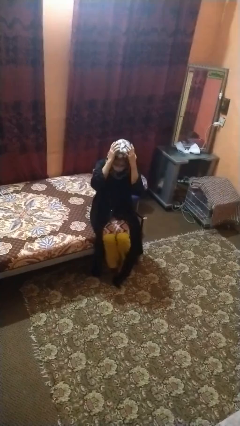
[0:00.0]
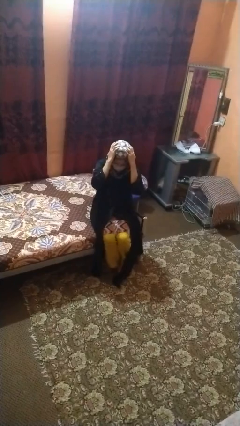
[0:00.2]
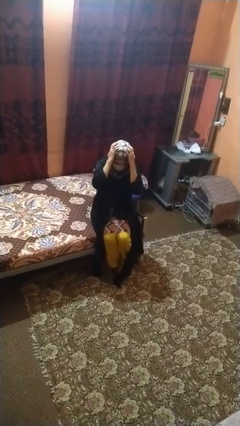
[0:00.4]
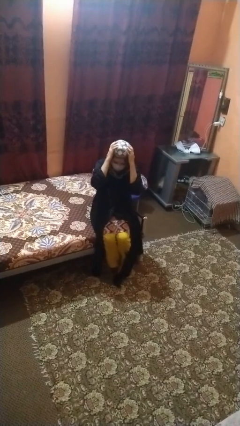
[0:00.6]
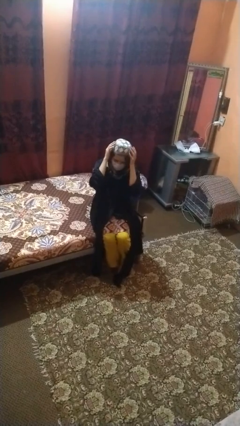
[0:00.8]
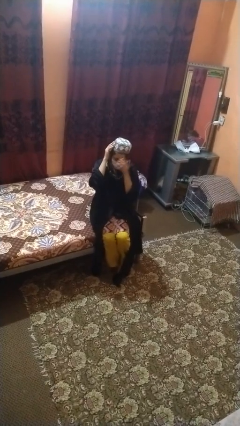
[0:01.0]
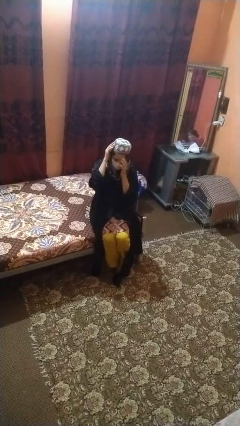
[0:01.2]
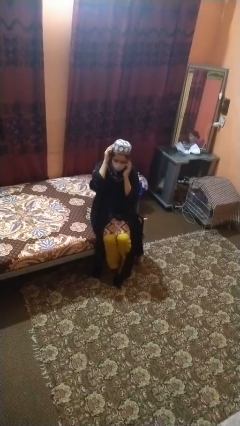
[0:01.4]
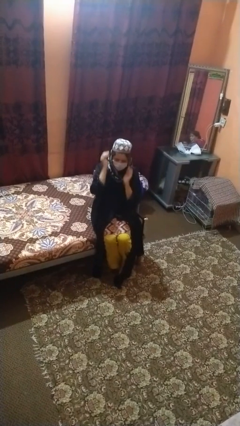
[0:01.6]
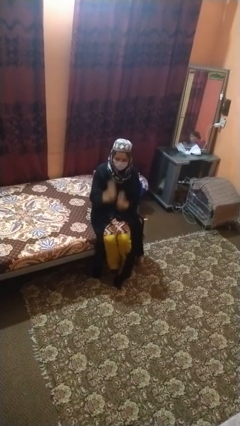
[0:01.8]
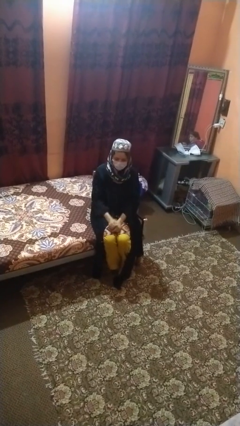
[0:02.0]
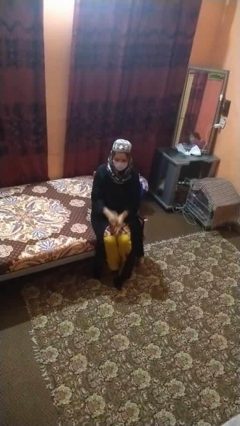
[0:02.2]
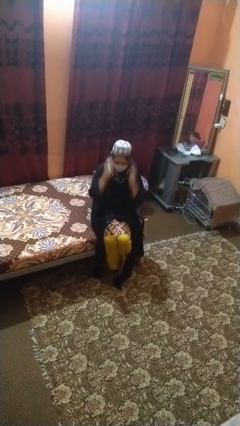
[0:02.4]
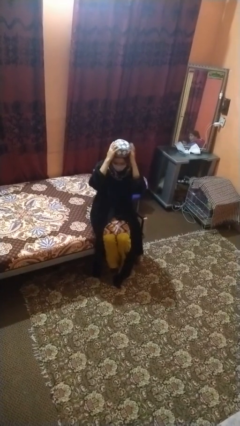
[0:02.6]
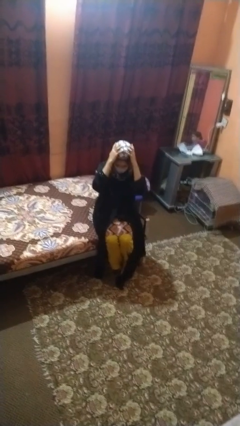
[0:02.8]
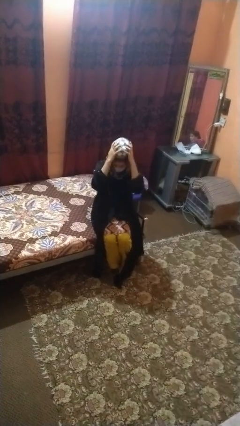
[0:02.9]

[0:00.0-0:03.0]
person puts on hat

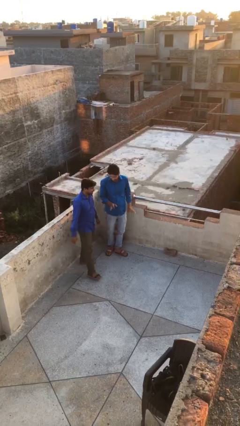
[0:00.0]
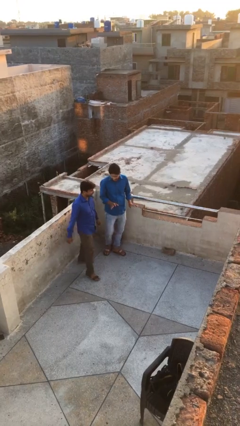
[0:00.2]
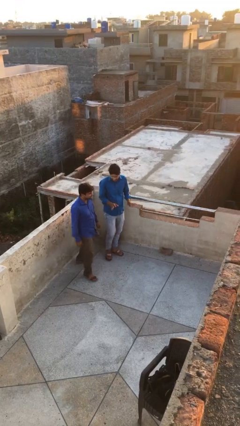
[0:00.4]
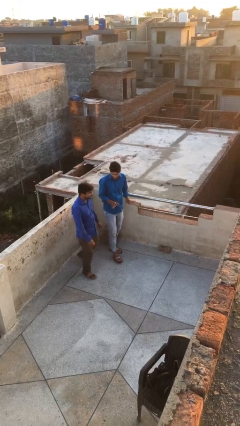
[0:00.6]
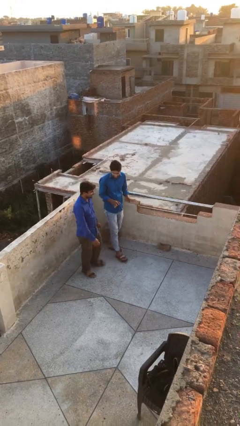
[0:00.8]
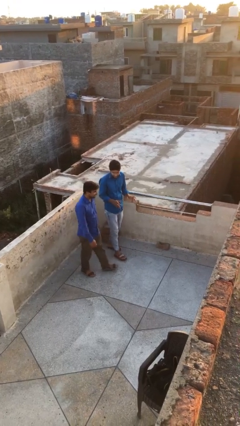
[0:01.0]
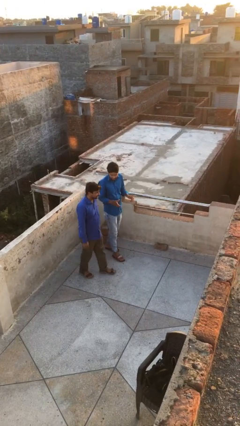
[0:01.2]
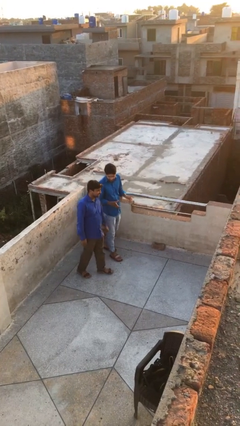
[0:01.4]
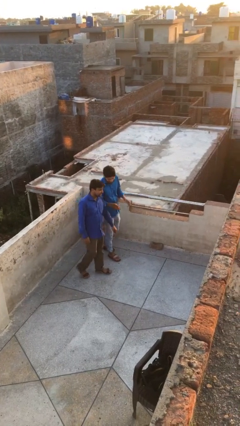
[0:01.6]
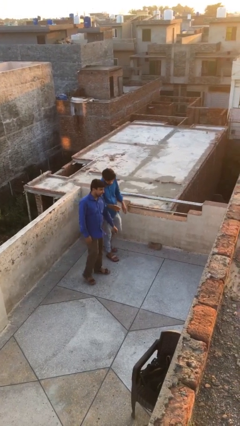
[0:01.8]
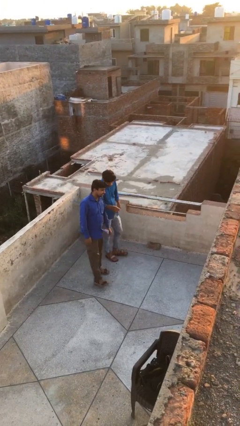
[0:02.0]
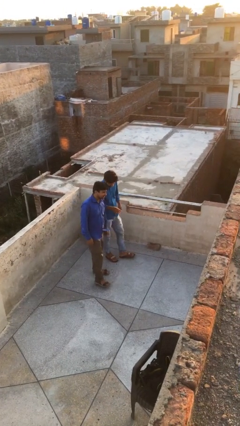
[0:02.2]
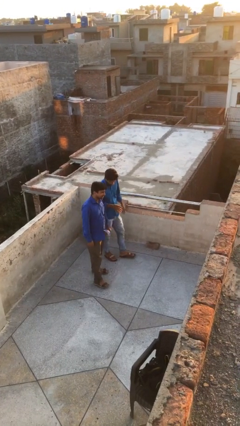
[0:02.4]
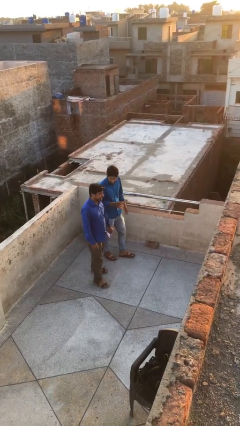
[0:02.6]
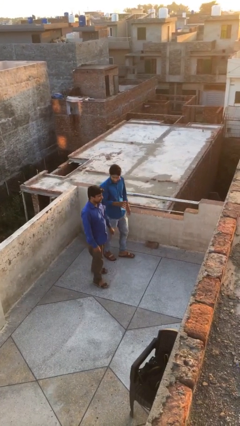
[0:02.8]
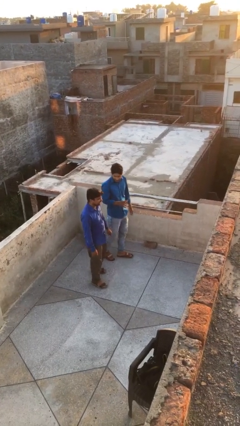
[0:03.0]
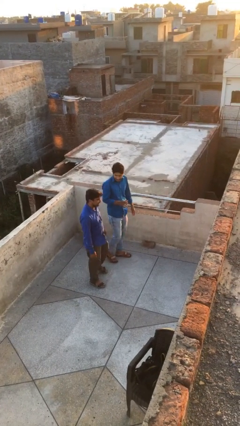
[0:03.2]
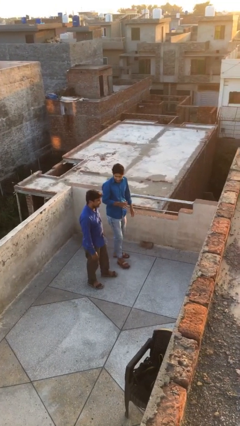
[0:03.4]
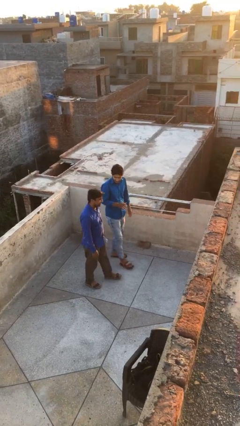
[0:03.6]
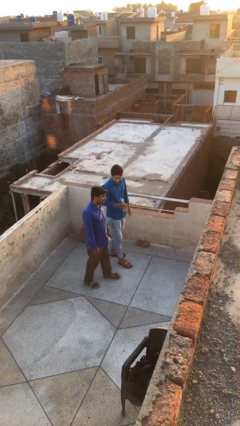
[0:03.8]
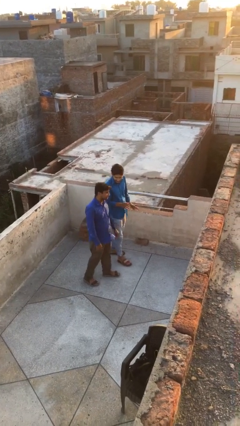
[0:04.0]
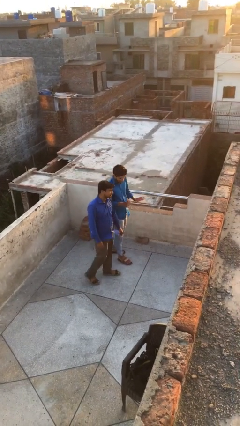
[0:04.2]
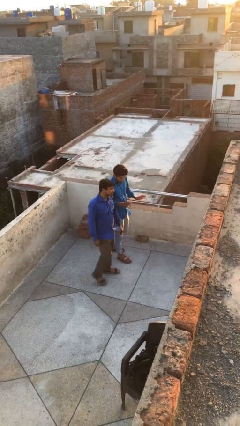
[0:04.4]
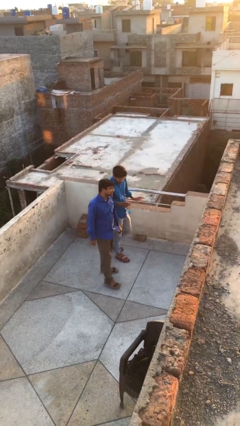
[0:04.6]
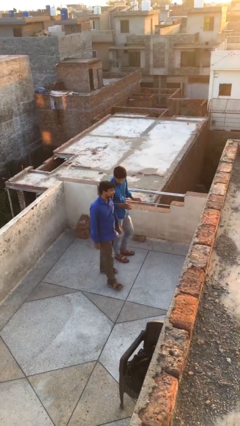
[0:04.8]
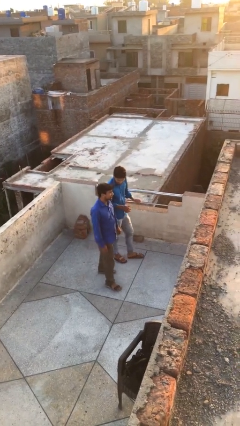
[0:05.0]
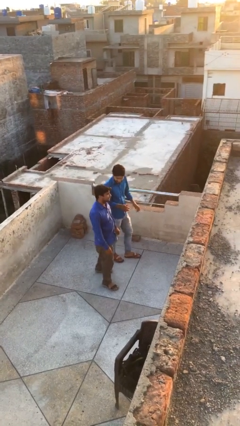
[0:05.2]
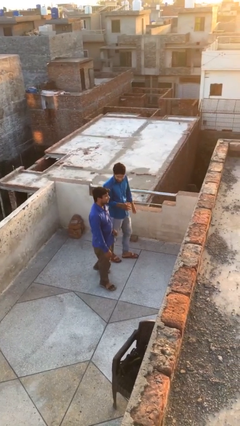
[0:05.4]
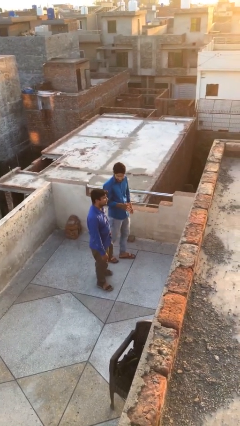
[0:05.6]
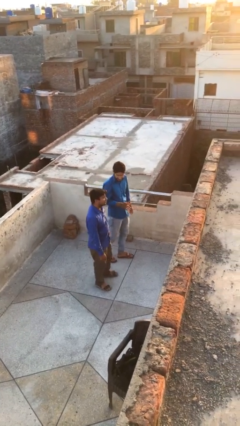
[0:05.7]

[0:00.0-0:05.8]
person talks to person

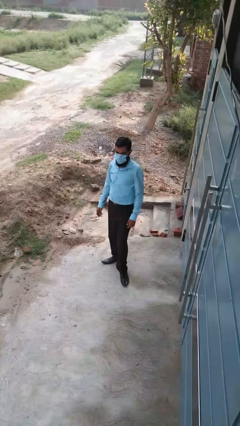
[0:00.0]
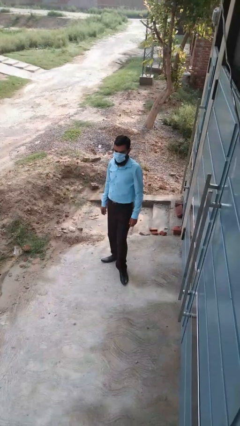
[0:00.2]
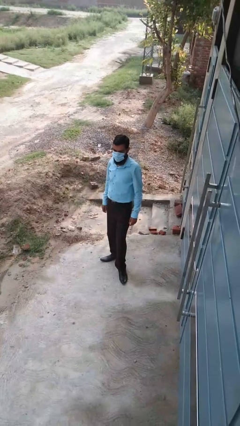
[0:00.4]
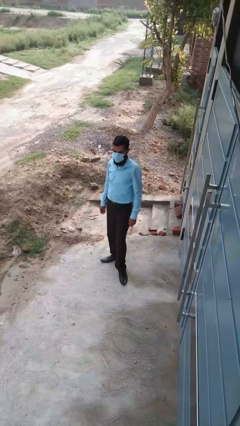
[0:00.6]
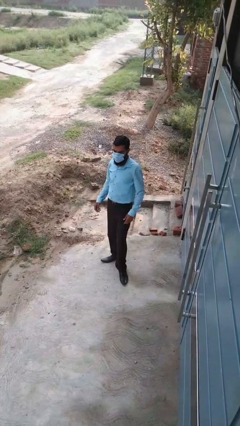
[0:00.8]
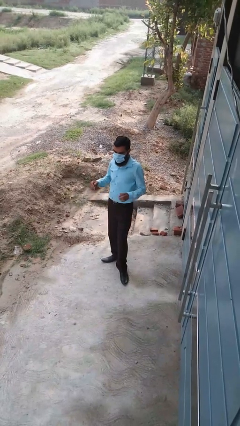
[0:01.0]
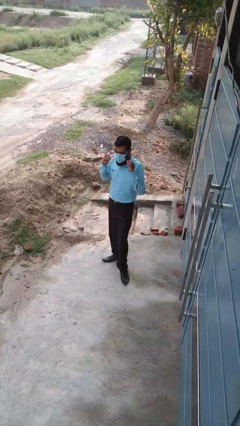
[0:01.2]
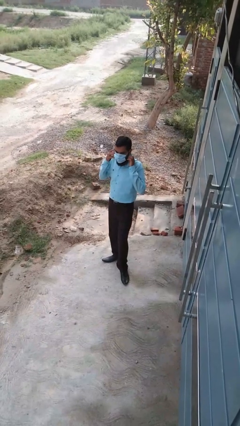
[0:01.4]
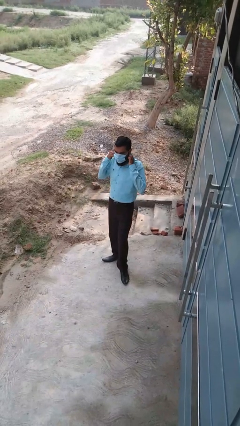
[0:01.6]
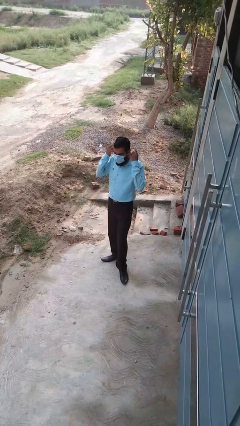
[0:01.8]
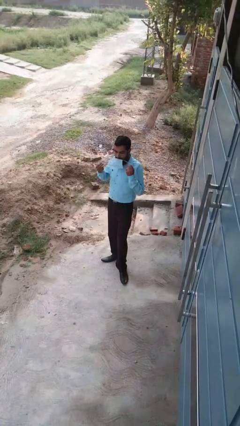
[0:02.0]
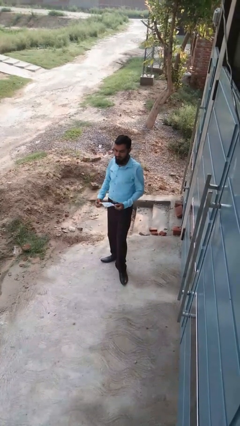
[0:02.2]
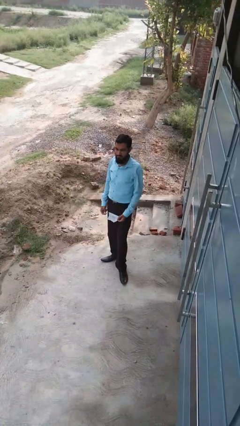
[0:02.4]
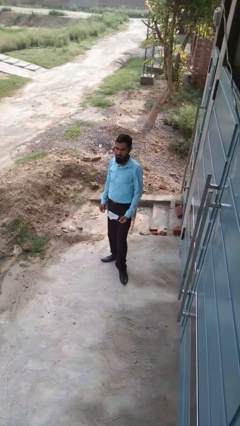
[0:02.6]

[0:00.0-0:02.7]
person takes off facemask

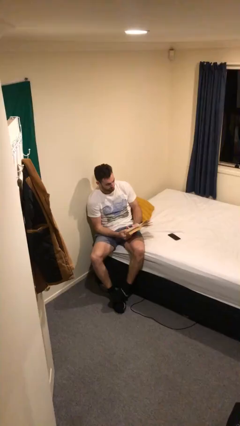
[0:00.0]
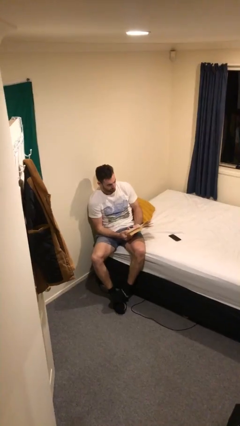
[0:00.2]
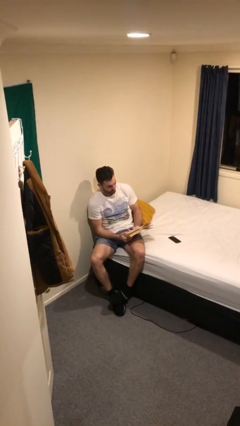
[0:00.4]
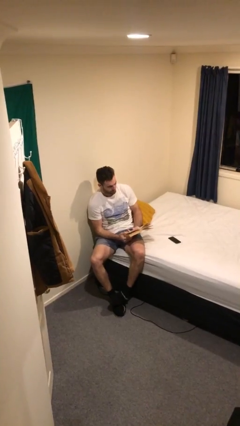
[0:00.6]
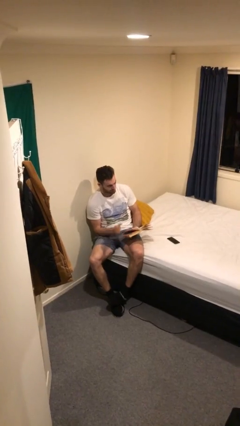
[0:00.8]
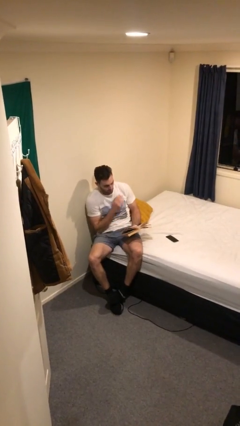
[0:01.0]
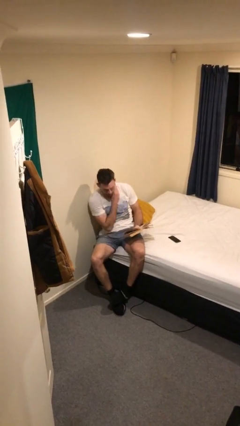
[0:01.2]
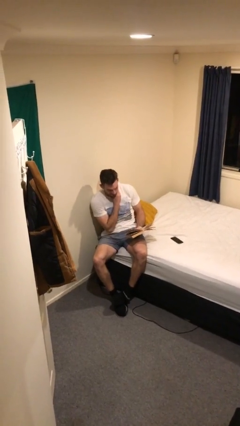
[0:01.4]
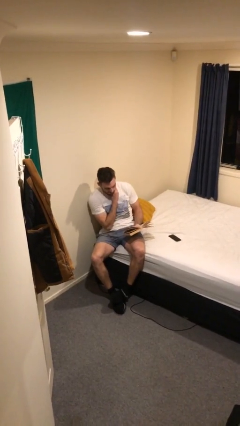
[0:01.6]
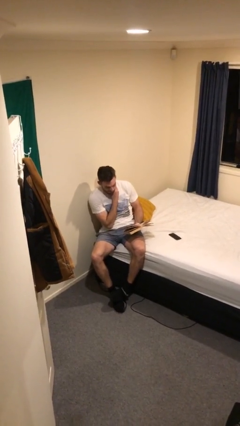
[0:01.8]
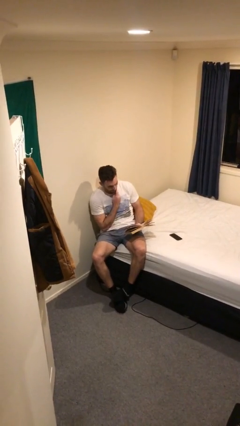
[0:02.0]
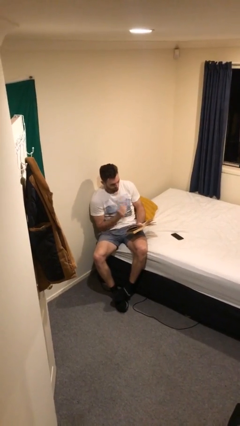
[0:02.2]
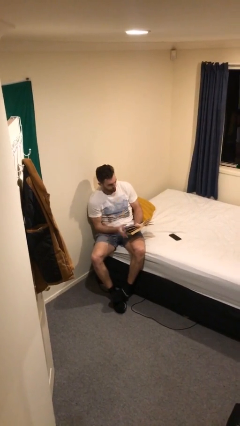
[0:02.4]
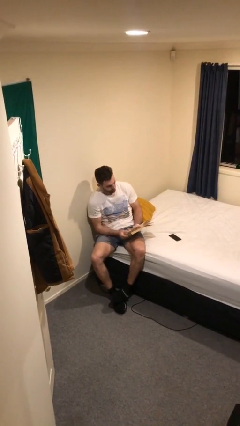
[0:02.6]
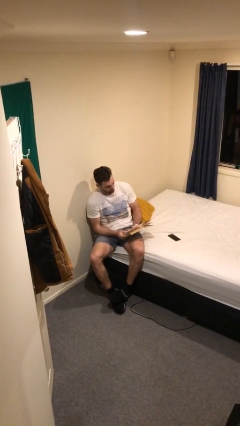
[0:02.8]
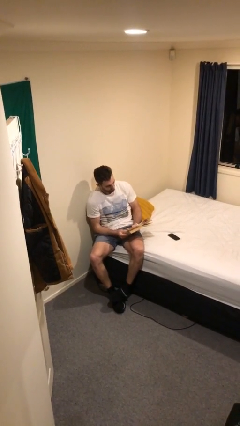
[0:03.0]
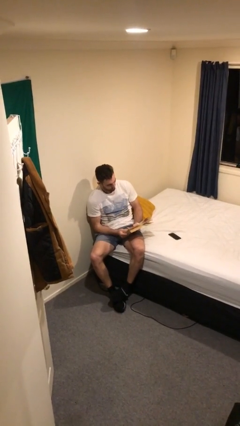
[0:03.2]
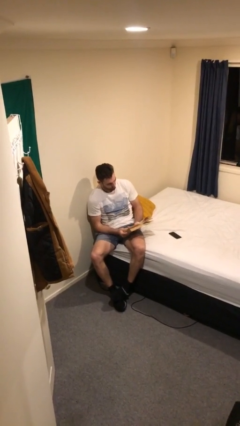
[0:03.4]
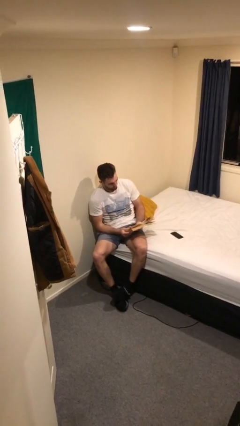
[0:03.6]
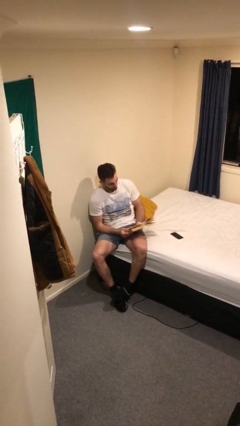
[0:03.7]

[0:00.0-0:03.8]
person reads document

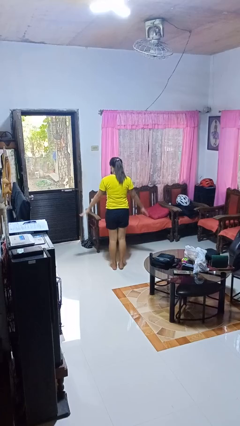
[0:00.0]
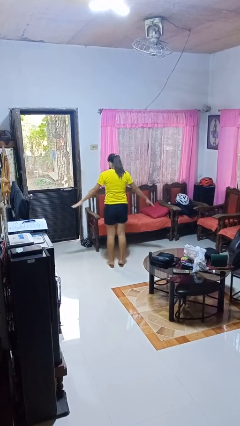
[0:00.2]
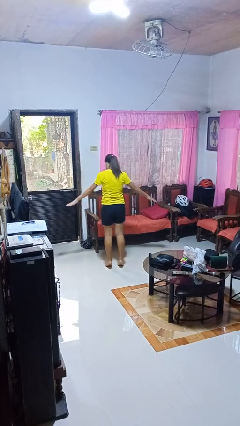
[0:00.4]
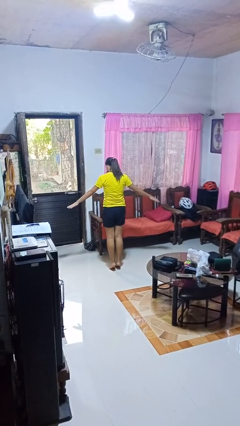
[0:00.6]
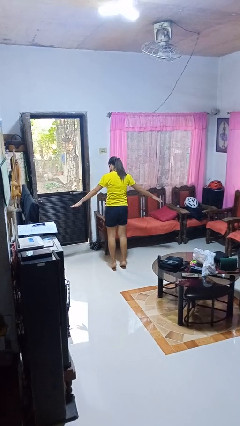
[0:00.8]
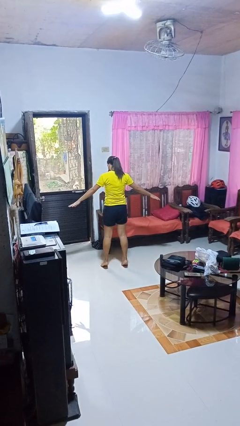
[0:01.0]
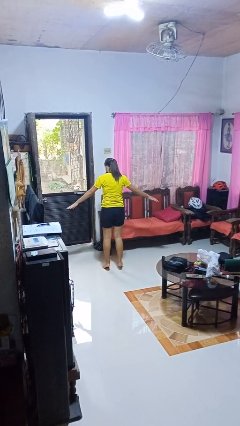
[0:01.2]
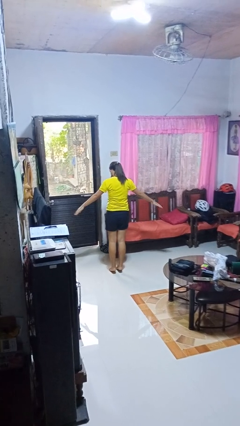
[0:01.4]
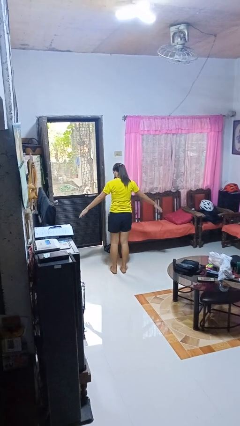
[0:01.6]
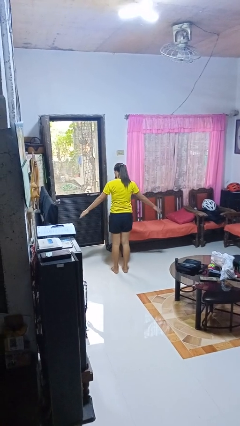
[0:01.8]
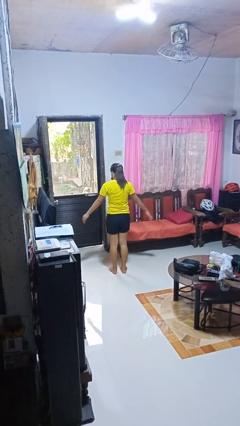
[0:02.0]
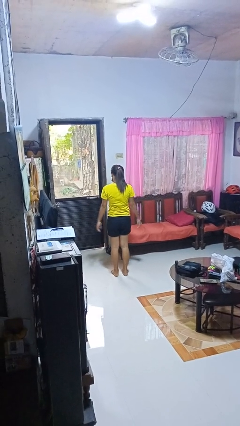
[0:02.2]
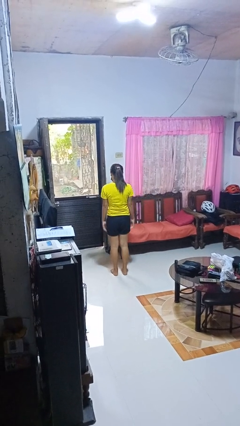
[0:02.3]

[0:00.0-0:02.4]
person walks tiptoe

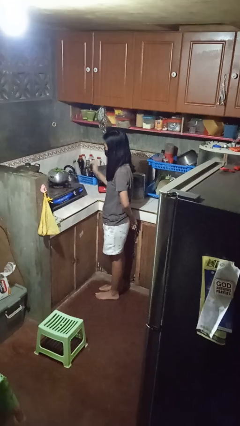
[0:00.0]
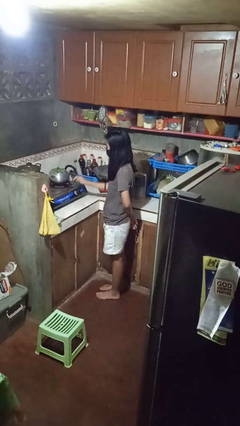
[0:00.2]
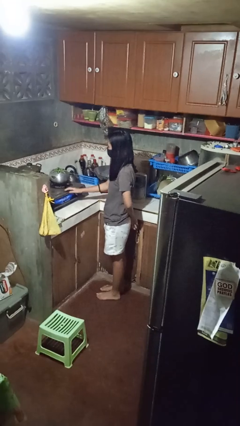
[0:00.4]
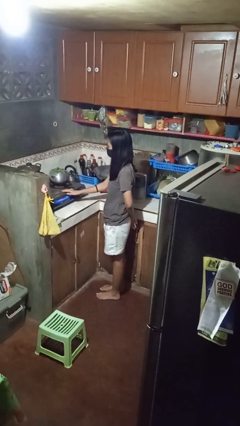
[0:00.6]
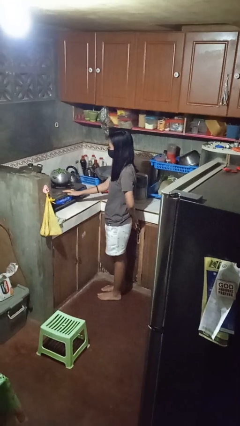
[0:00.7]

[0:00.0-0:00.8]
person burns hand
